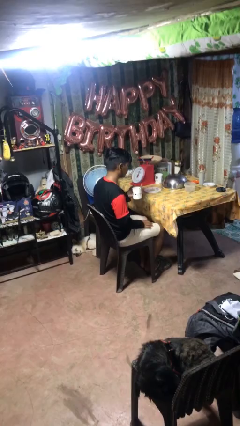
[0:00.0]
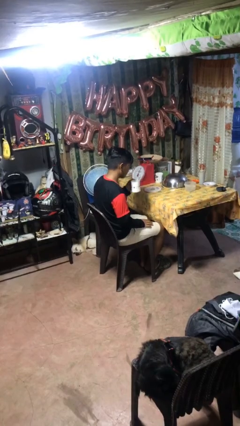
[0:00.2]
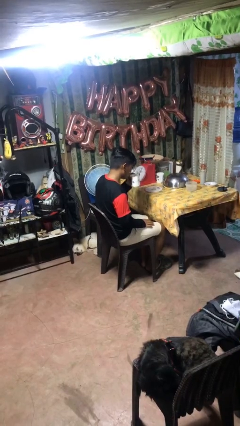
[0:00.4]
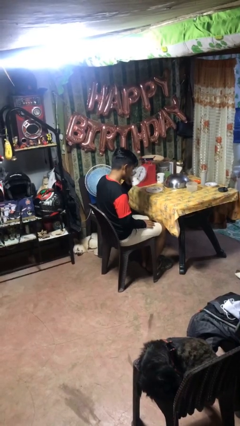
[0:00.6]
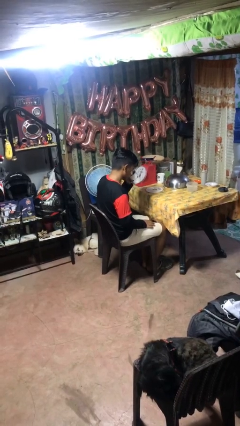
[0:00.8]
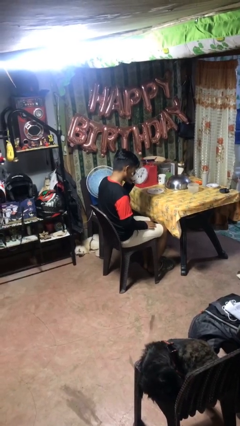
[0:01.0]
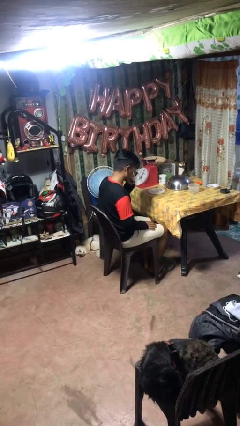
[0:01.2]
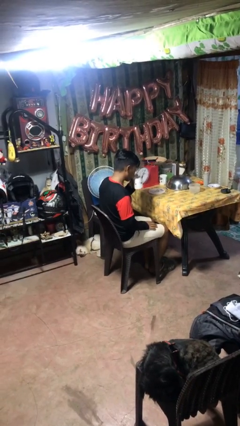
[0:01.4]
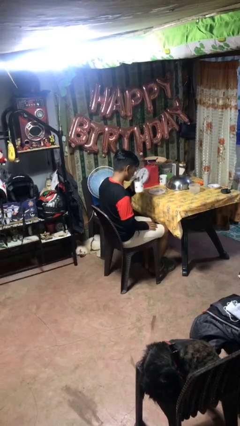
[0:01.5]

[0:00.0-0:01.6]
person drinks from mug

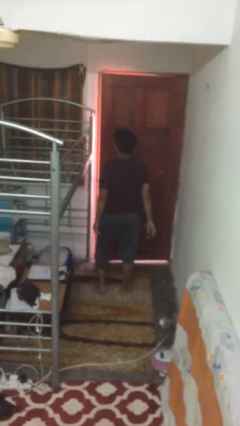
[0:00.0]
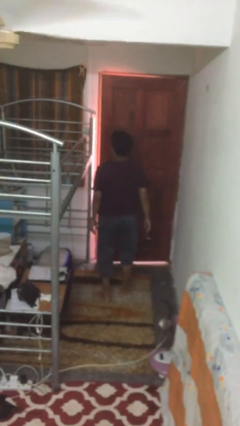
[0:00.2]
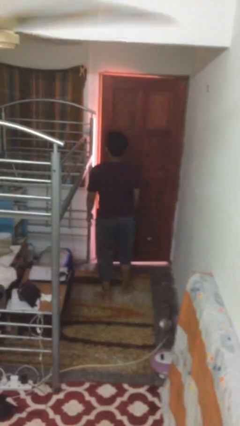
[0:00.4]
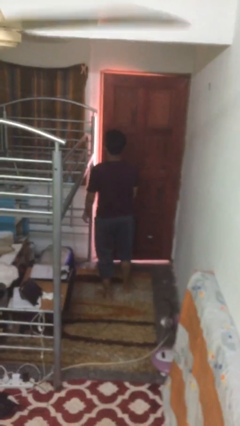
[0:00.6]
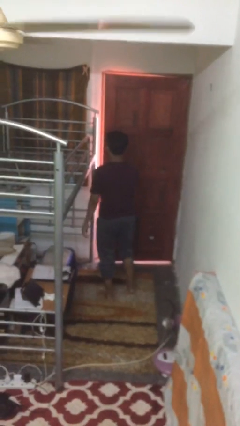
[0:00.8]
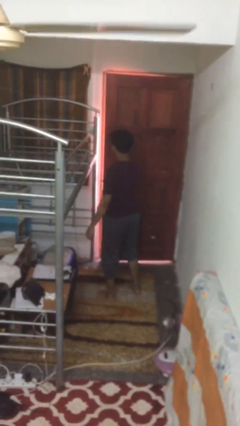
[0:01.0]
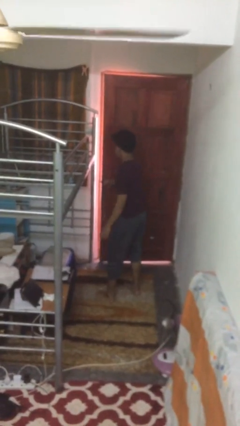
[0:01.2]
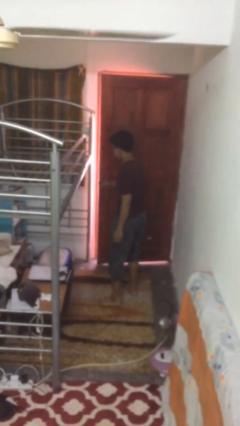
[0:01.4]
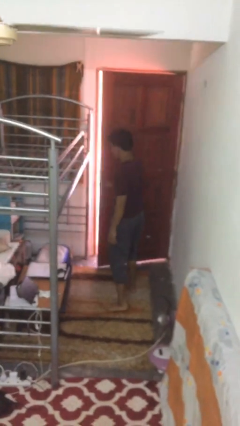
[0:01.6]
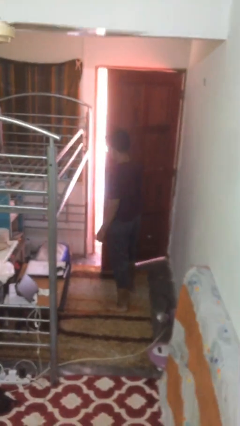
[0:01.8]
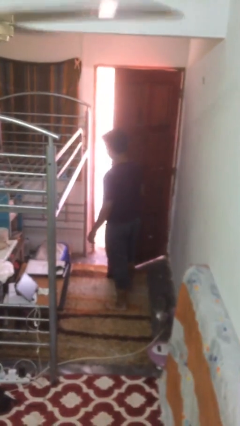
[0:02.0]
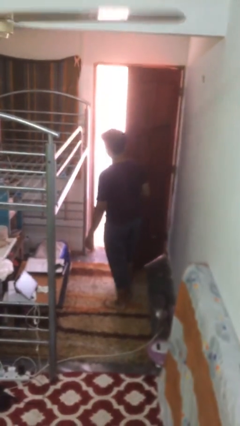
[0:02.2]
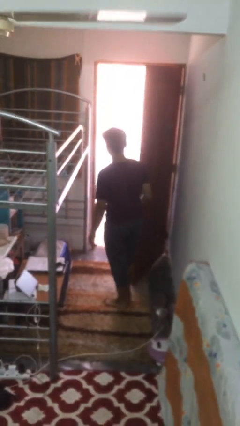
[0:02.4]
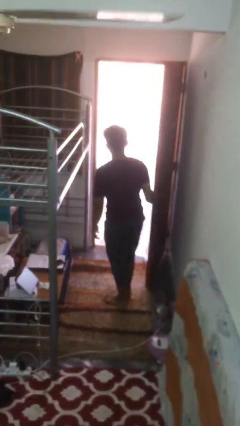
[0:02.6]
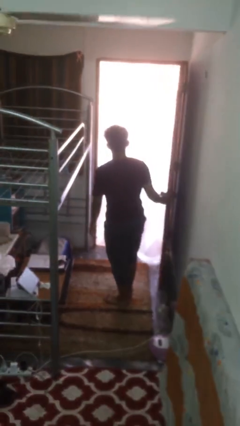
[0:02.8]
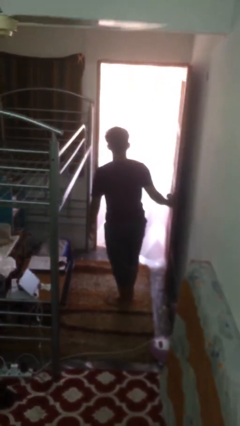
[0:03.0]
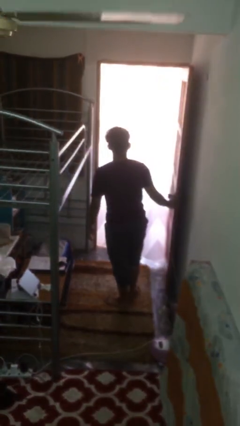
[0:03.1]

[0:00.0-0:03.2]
person opens facility door

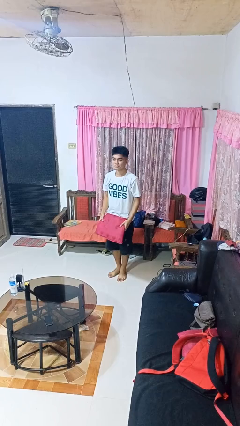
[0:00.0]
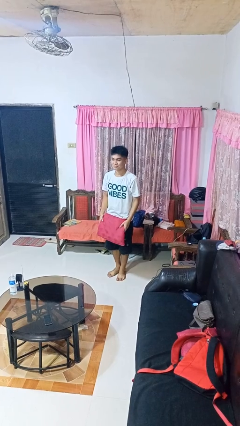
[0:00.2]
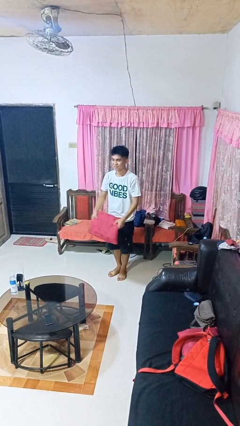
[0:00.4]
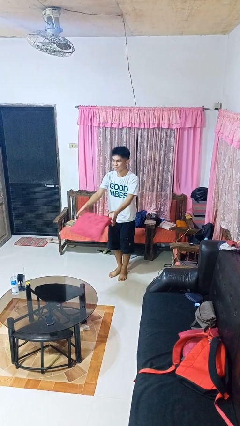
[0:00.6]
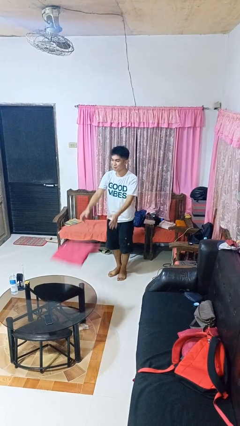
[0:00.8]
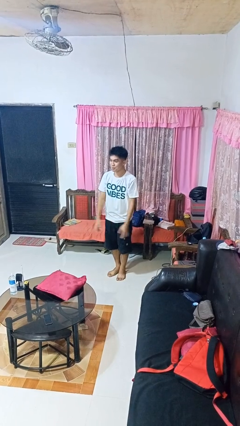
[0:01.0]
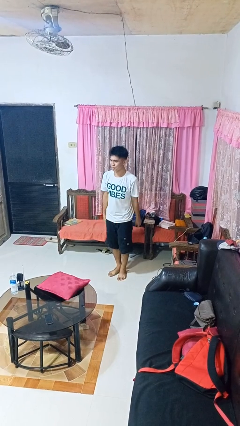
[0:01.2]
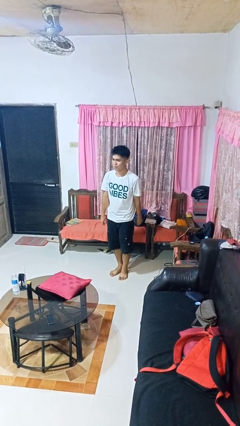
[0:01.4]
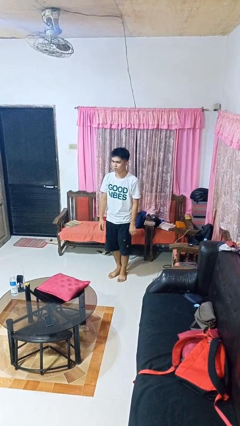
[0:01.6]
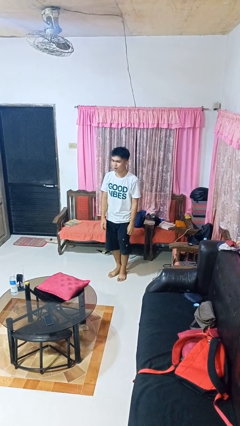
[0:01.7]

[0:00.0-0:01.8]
person throws object on table

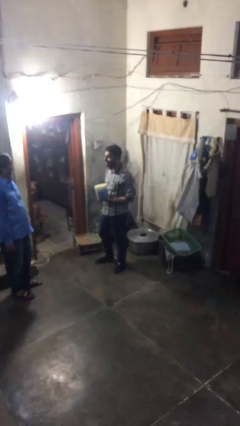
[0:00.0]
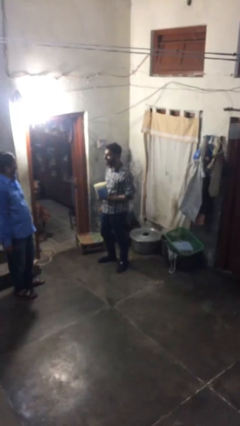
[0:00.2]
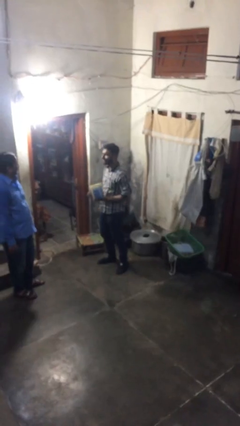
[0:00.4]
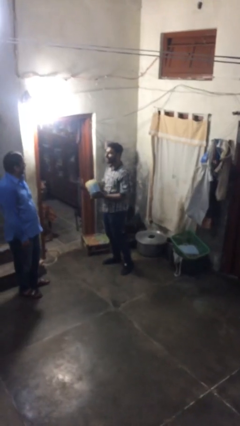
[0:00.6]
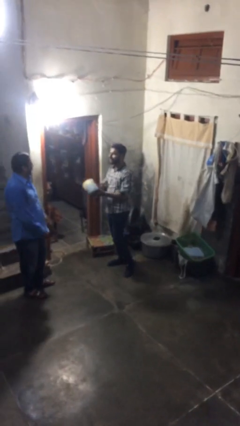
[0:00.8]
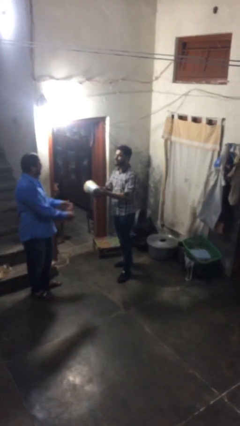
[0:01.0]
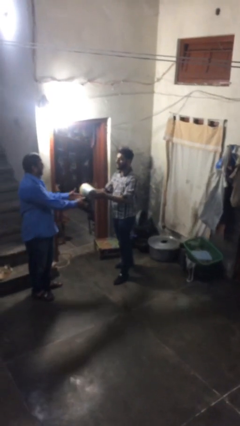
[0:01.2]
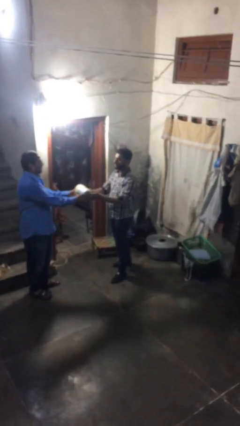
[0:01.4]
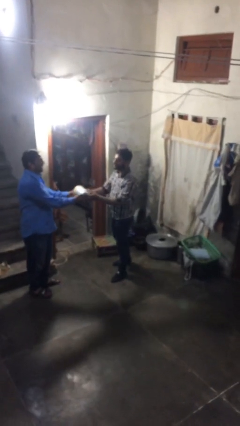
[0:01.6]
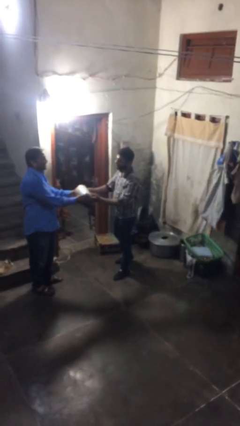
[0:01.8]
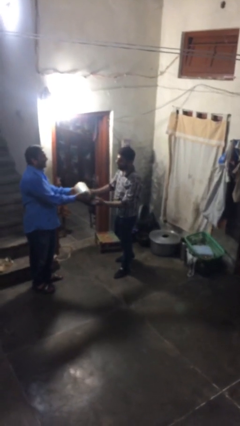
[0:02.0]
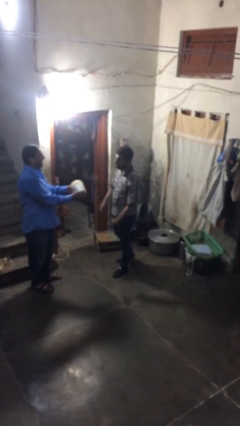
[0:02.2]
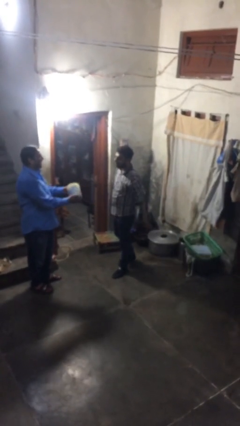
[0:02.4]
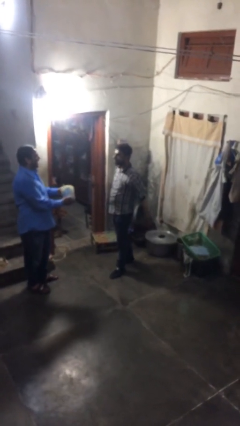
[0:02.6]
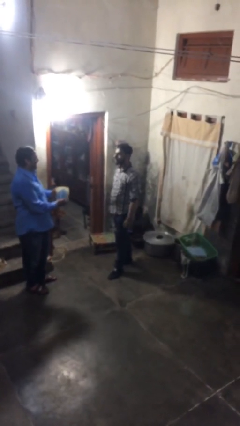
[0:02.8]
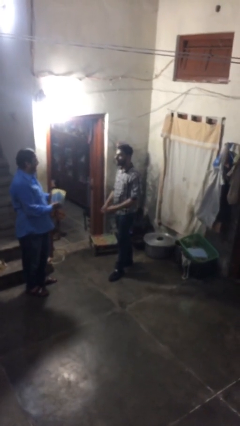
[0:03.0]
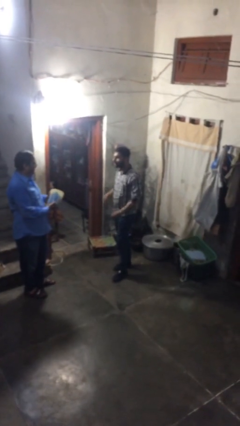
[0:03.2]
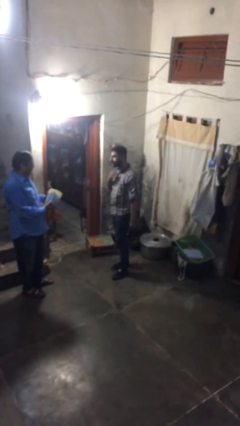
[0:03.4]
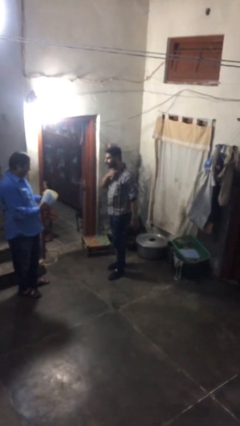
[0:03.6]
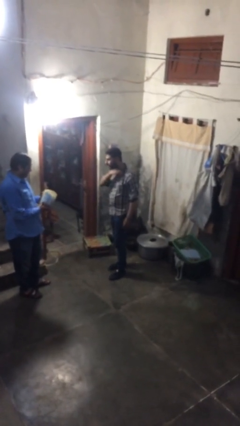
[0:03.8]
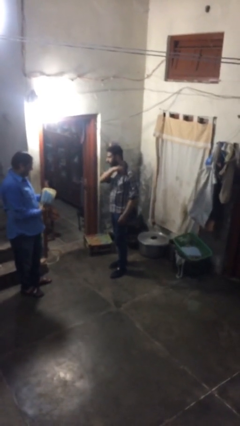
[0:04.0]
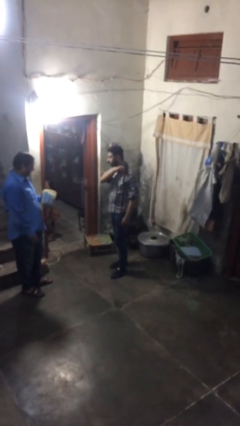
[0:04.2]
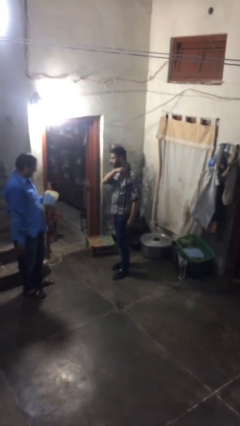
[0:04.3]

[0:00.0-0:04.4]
person transfers object to person

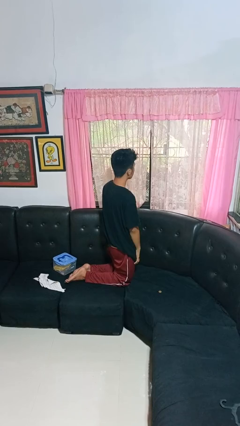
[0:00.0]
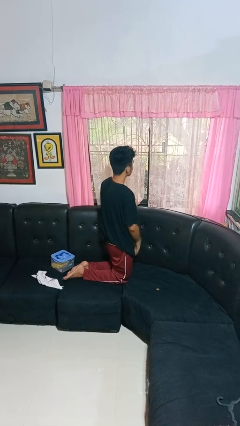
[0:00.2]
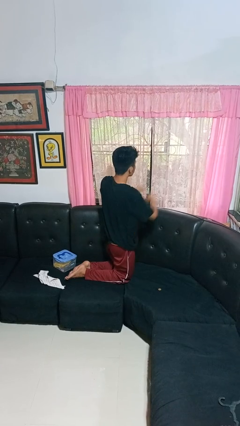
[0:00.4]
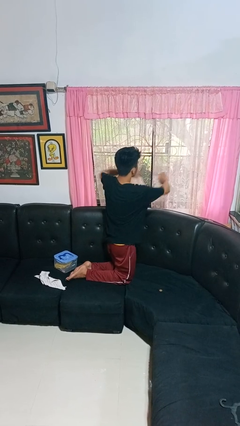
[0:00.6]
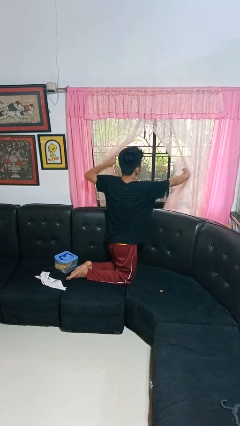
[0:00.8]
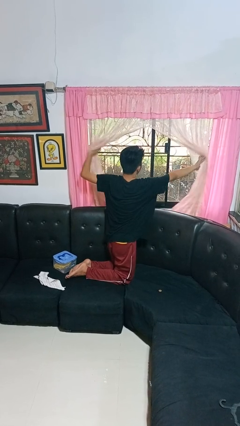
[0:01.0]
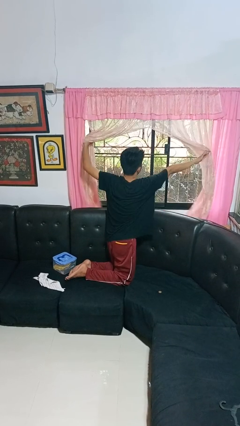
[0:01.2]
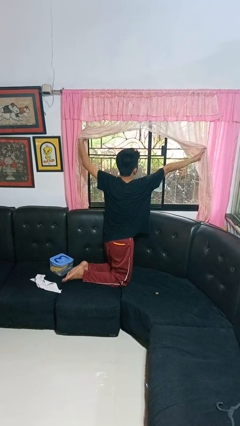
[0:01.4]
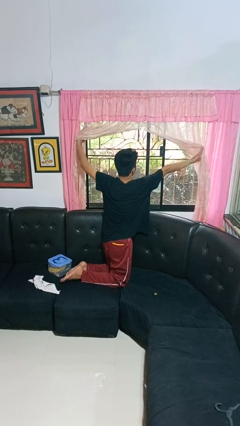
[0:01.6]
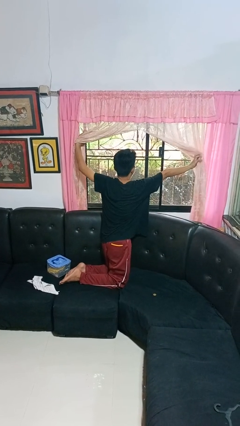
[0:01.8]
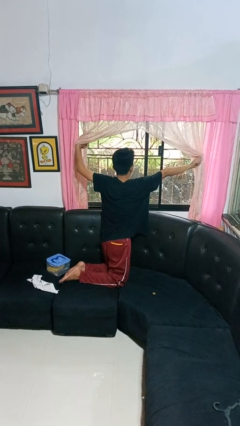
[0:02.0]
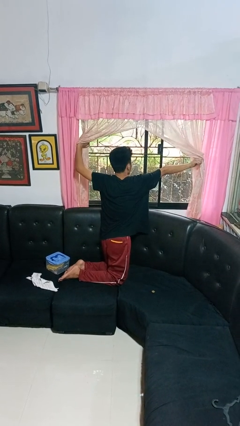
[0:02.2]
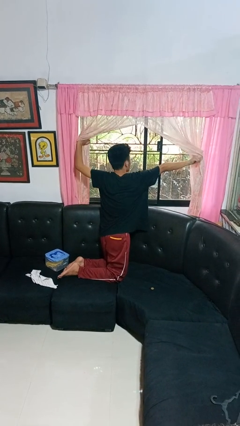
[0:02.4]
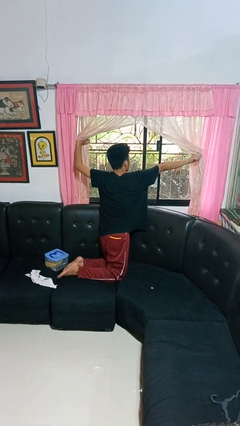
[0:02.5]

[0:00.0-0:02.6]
person opens curtains

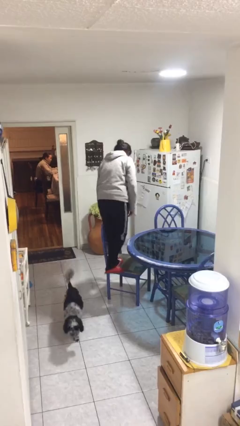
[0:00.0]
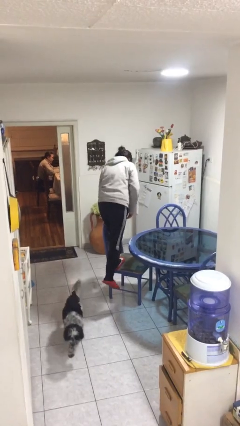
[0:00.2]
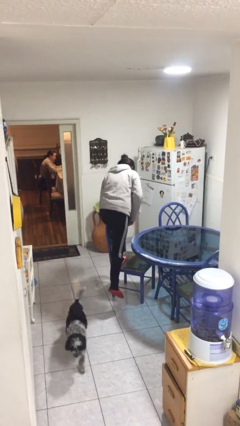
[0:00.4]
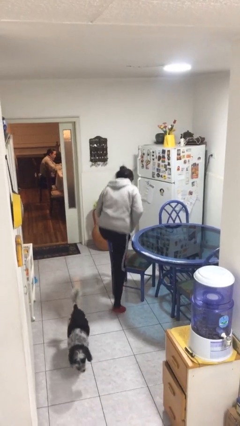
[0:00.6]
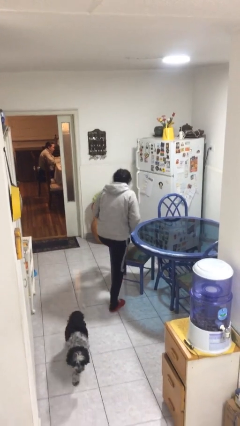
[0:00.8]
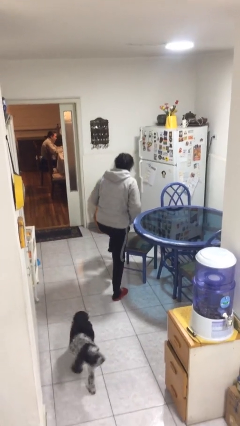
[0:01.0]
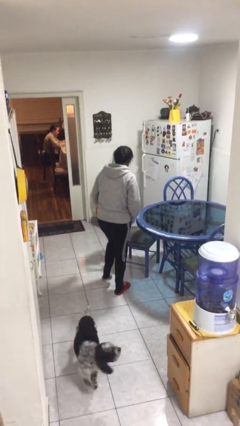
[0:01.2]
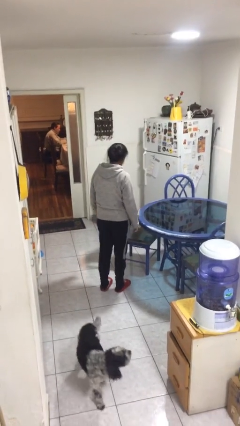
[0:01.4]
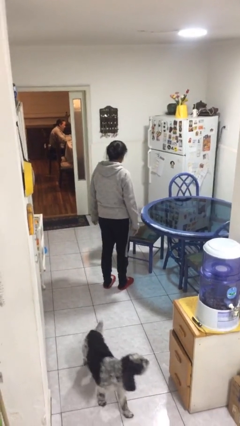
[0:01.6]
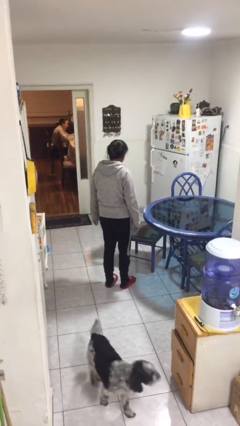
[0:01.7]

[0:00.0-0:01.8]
person climbs off chair

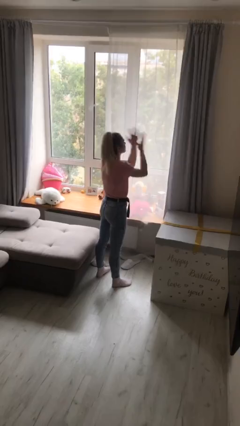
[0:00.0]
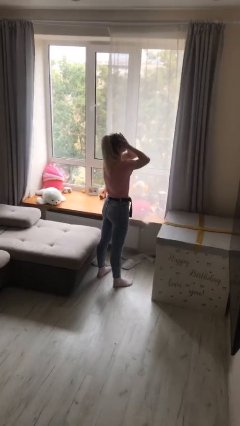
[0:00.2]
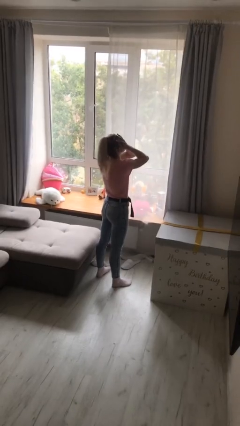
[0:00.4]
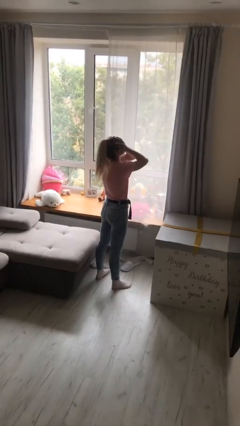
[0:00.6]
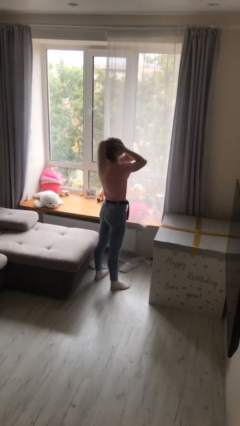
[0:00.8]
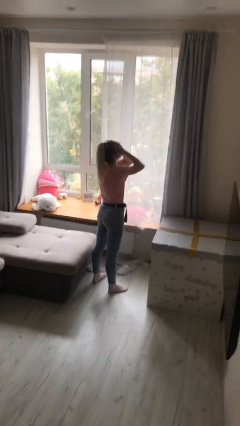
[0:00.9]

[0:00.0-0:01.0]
person covers face with hands

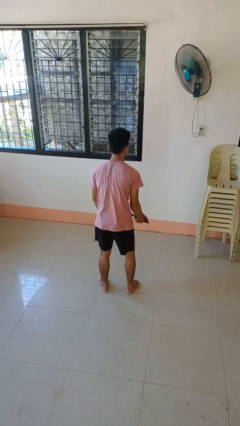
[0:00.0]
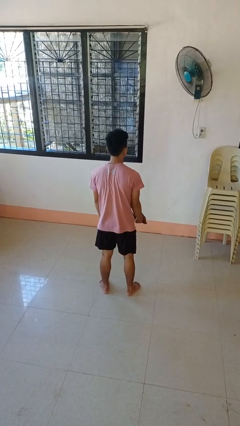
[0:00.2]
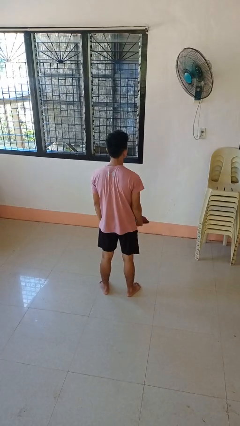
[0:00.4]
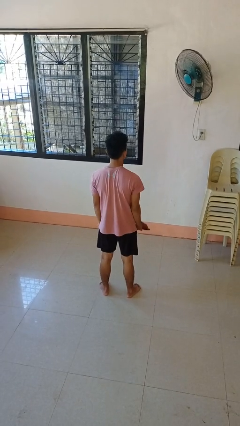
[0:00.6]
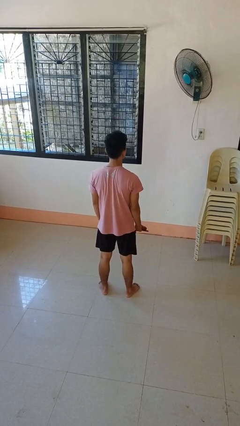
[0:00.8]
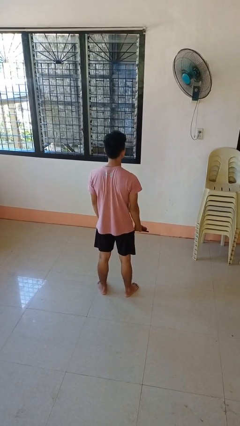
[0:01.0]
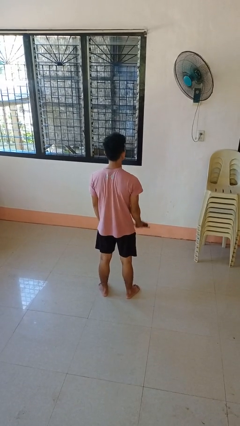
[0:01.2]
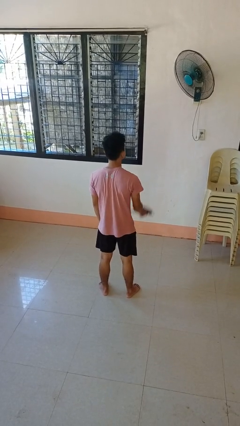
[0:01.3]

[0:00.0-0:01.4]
person picks up object from floor
